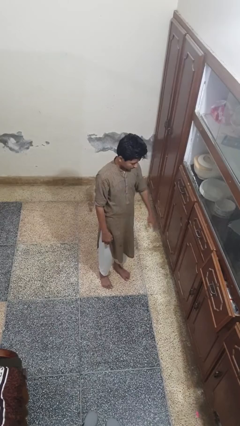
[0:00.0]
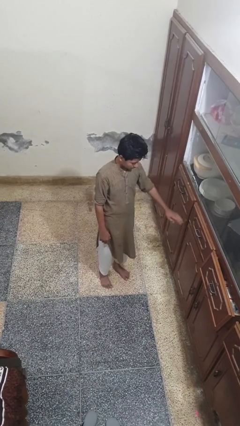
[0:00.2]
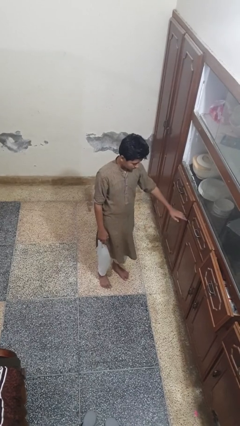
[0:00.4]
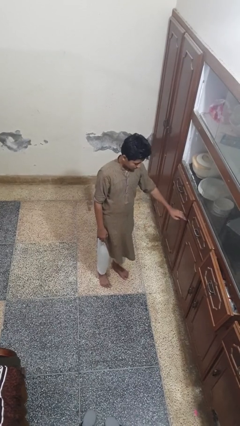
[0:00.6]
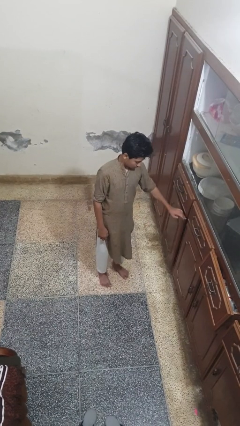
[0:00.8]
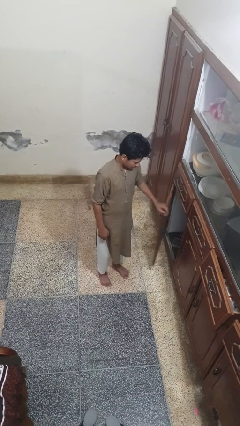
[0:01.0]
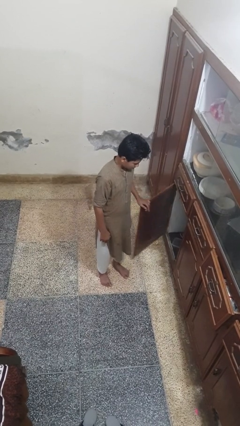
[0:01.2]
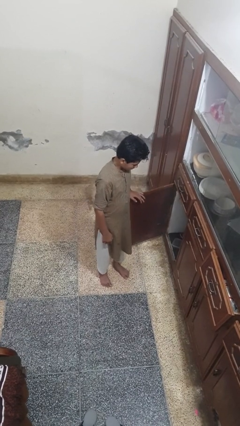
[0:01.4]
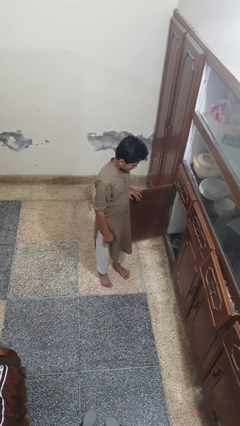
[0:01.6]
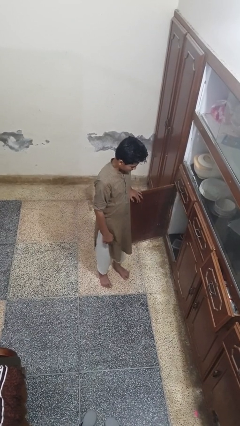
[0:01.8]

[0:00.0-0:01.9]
person opens cabinet

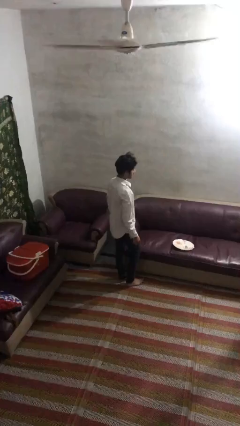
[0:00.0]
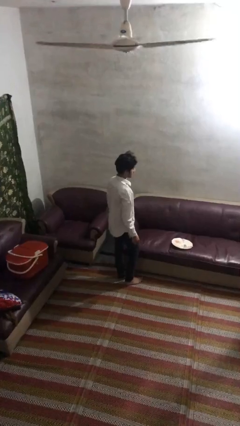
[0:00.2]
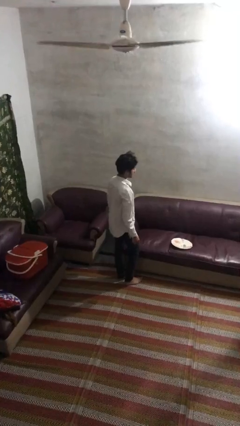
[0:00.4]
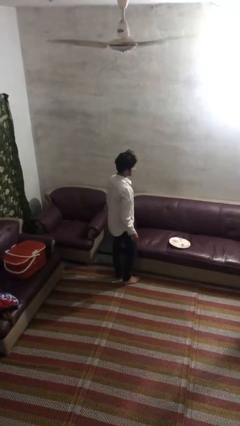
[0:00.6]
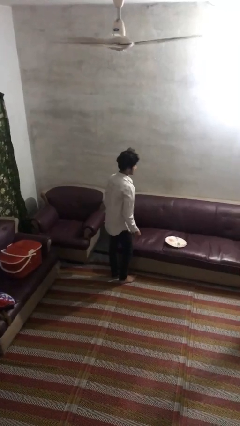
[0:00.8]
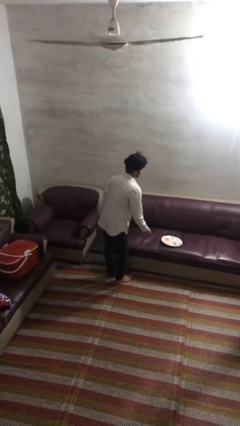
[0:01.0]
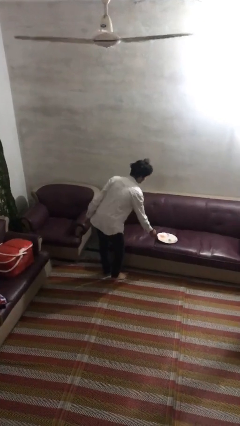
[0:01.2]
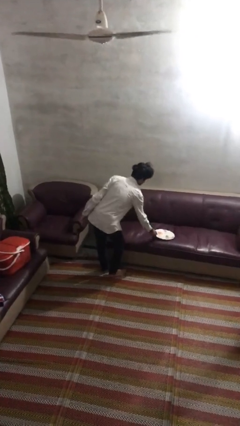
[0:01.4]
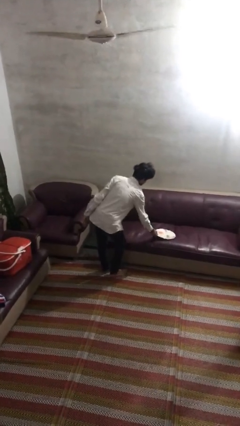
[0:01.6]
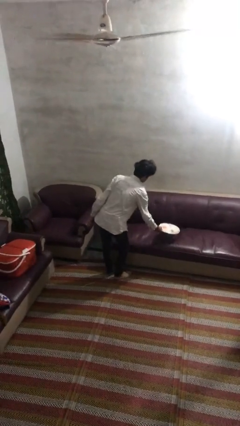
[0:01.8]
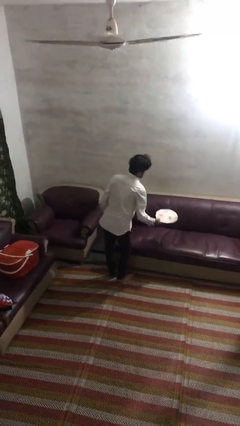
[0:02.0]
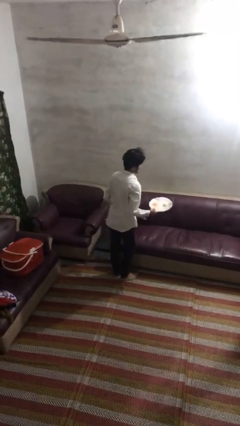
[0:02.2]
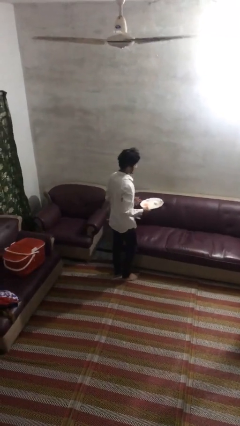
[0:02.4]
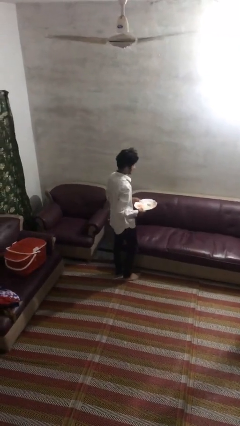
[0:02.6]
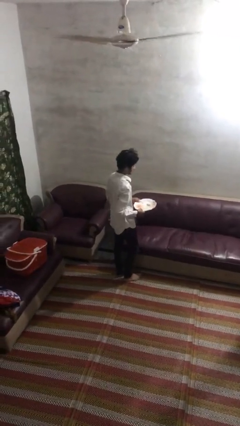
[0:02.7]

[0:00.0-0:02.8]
person picks up object from couch

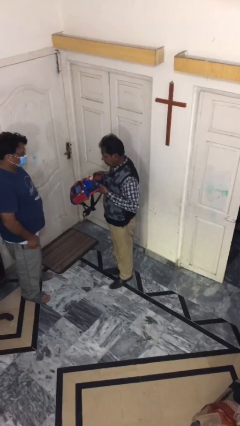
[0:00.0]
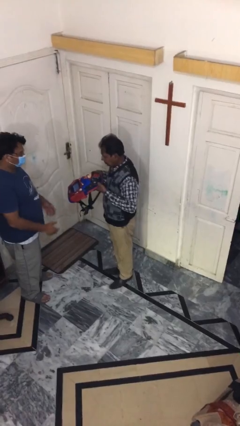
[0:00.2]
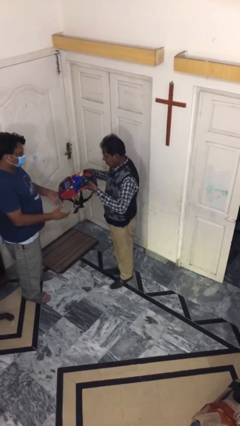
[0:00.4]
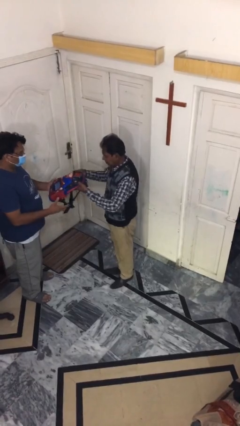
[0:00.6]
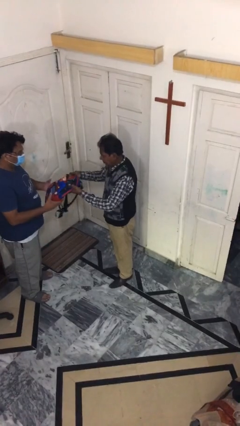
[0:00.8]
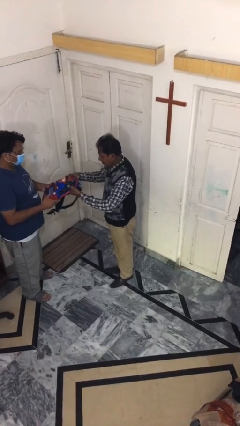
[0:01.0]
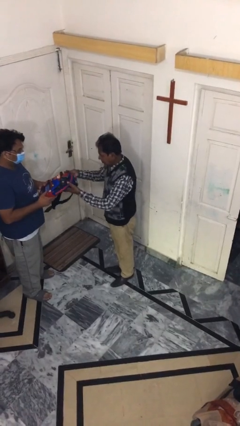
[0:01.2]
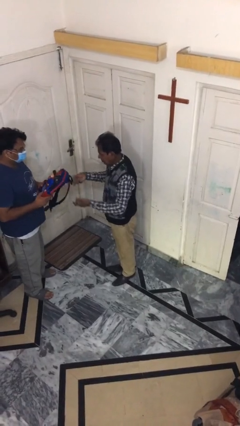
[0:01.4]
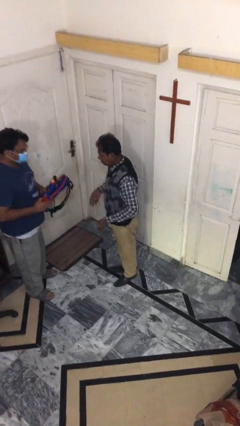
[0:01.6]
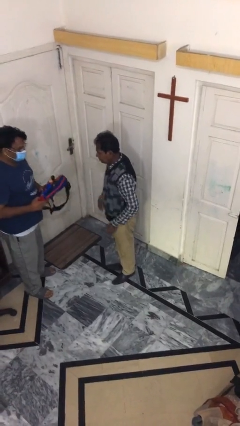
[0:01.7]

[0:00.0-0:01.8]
person transfers object to person

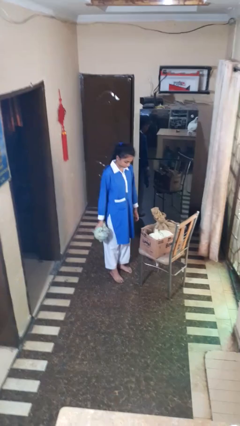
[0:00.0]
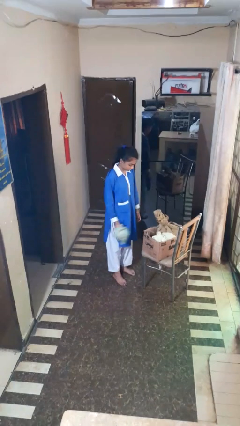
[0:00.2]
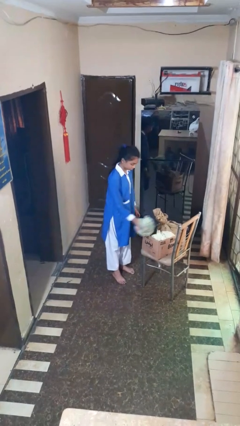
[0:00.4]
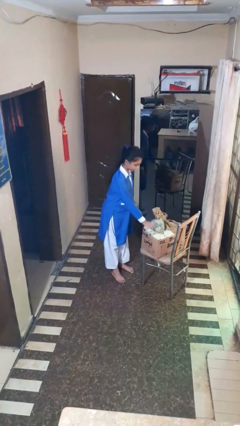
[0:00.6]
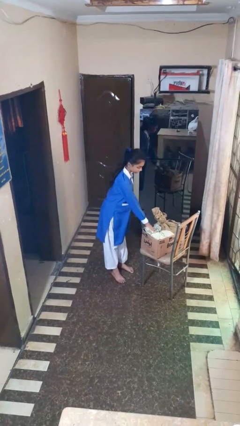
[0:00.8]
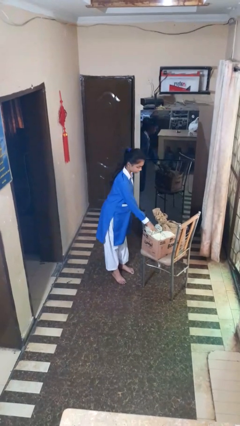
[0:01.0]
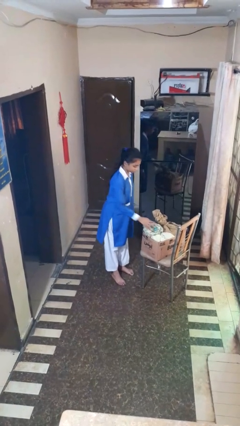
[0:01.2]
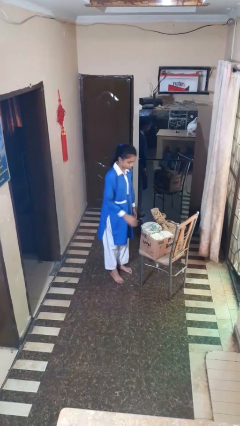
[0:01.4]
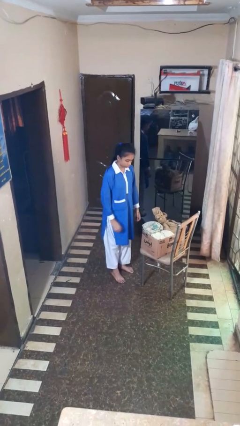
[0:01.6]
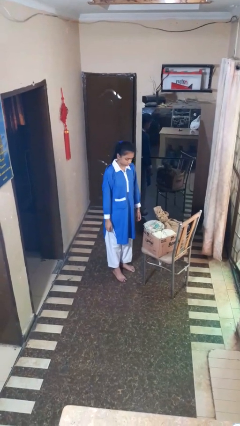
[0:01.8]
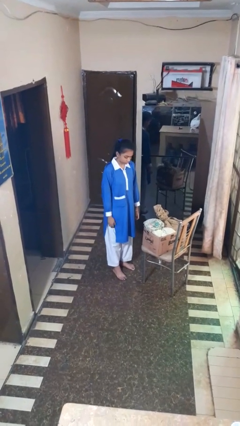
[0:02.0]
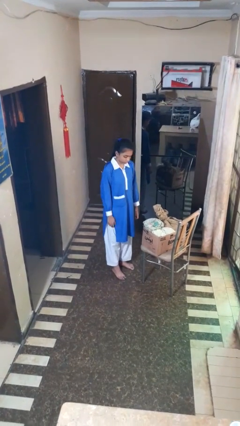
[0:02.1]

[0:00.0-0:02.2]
person puts object into box

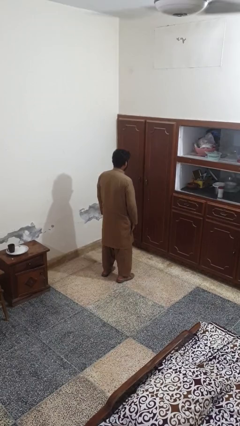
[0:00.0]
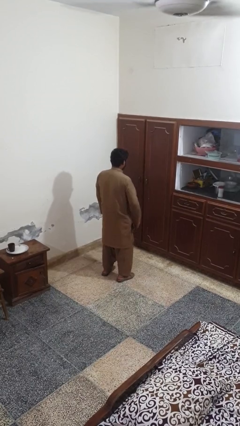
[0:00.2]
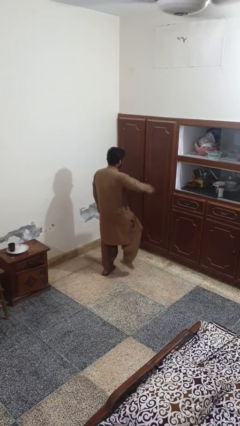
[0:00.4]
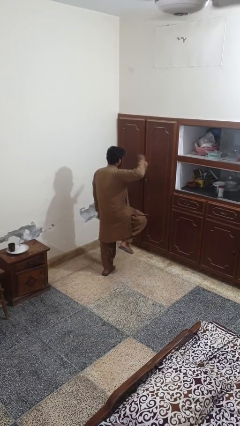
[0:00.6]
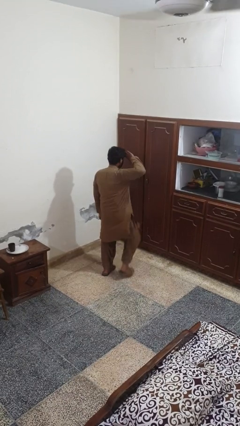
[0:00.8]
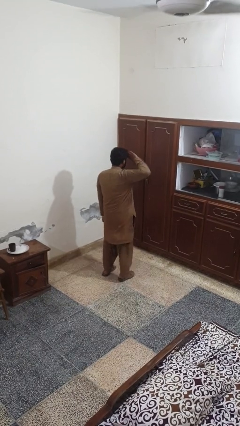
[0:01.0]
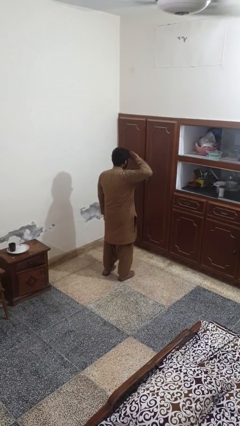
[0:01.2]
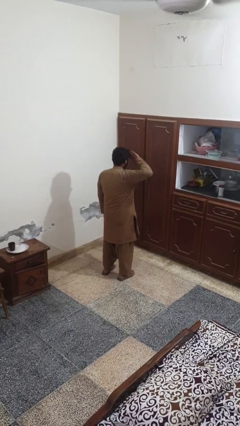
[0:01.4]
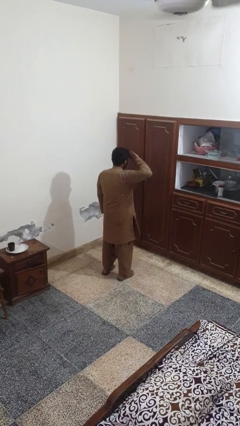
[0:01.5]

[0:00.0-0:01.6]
person salutes

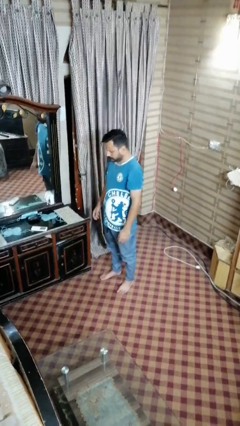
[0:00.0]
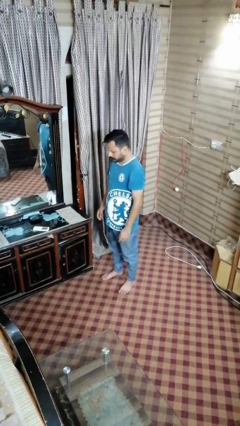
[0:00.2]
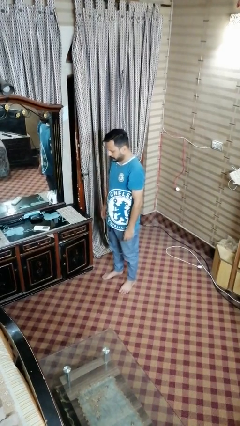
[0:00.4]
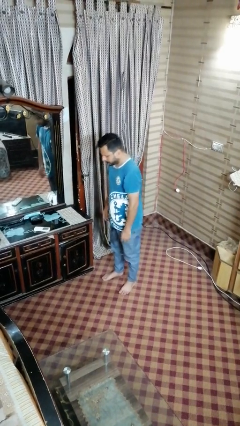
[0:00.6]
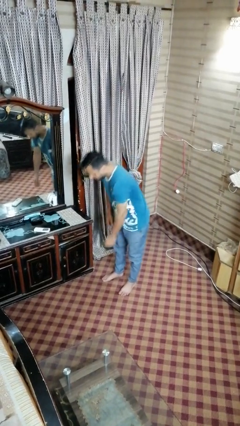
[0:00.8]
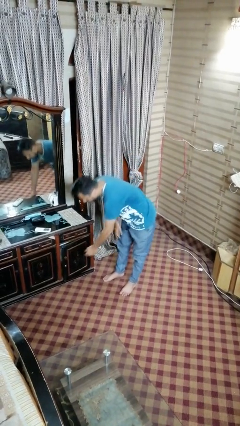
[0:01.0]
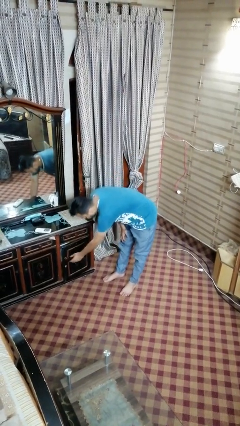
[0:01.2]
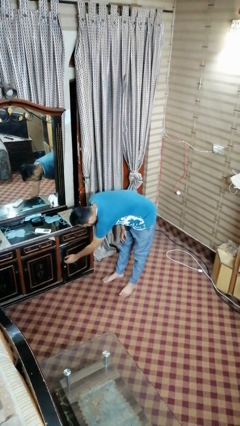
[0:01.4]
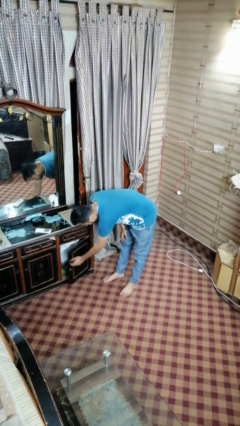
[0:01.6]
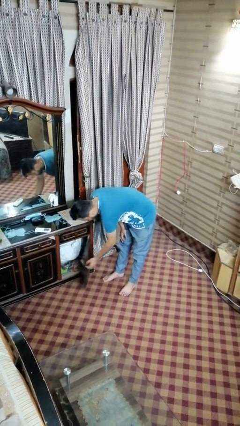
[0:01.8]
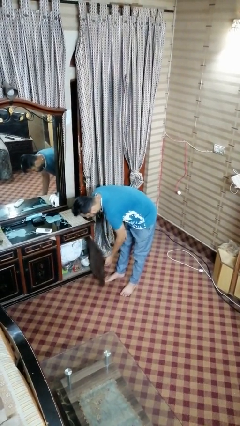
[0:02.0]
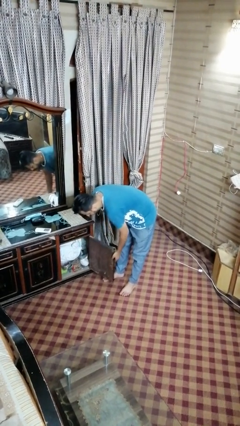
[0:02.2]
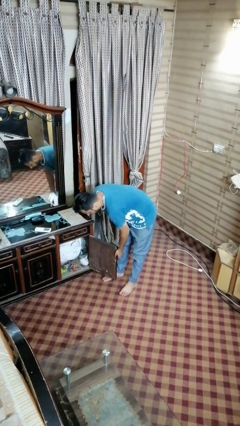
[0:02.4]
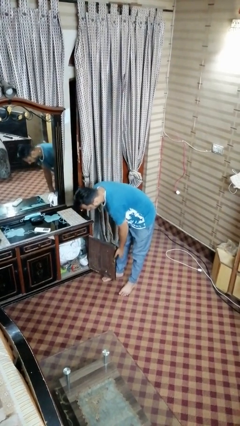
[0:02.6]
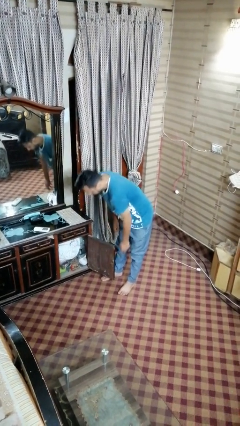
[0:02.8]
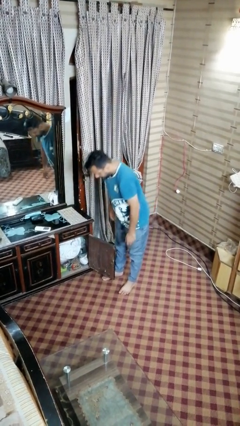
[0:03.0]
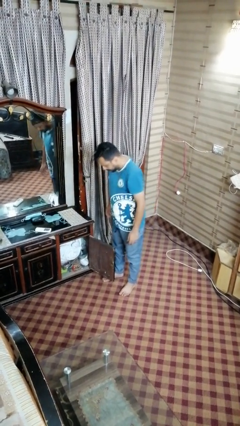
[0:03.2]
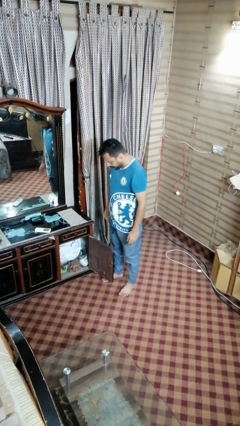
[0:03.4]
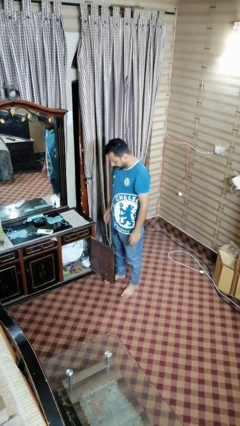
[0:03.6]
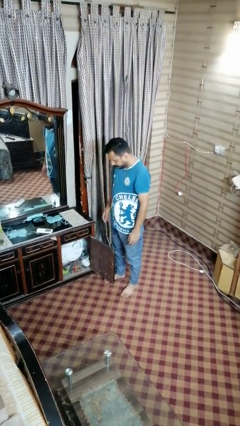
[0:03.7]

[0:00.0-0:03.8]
person opens dresser drawer

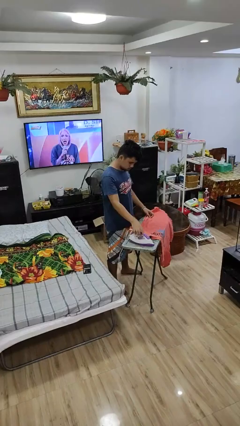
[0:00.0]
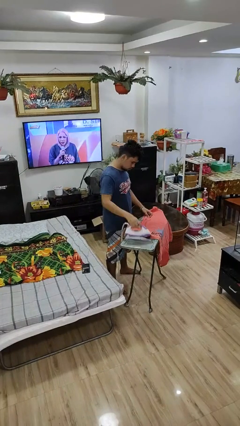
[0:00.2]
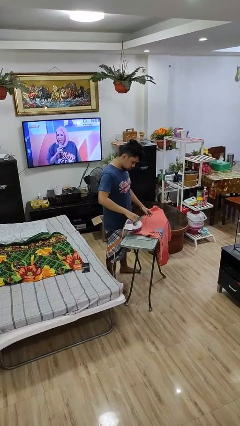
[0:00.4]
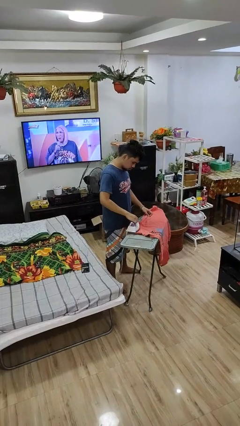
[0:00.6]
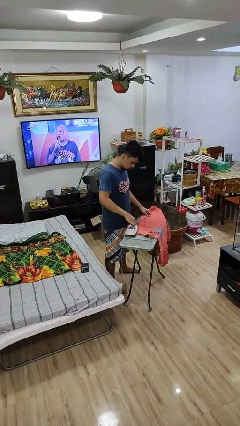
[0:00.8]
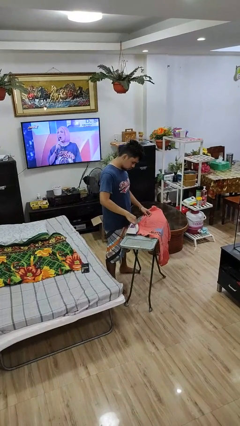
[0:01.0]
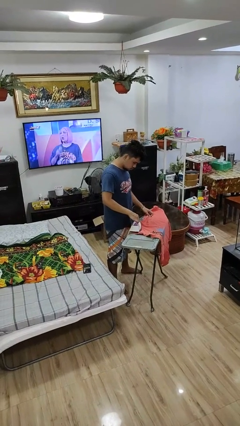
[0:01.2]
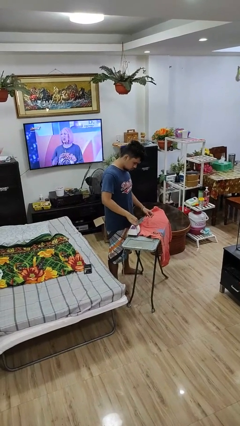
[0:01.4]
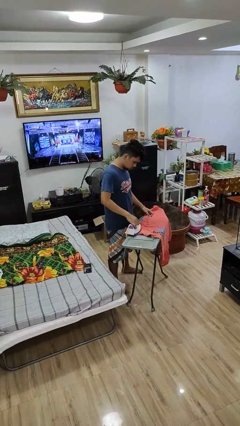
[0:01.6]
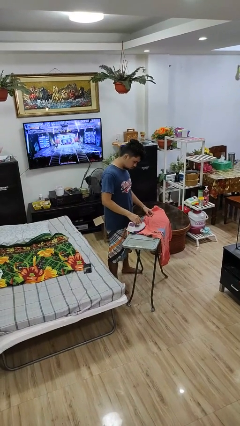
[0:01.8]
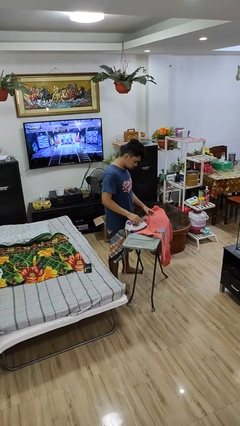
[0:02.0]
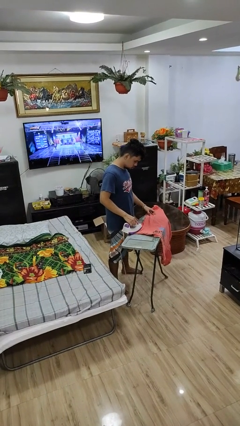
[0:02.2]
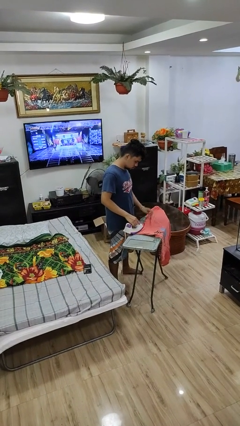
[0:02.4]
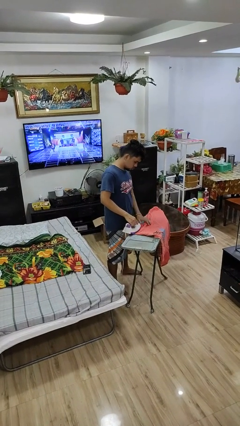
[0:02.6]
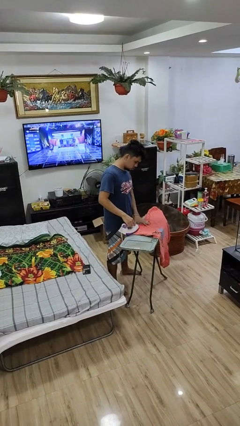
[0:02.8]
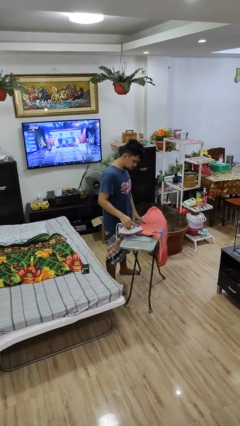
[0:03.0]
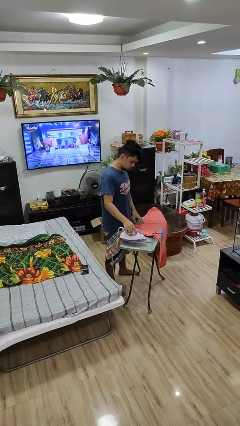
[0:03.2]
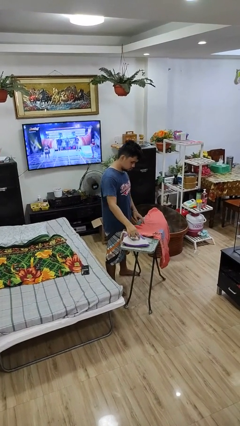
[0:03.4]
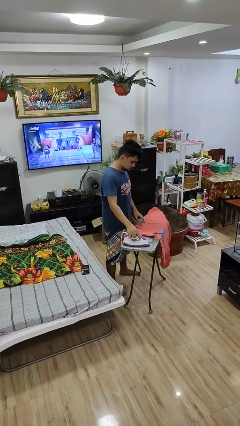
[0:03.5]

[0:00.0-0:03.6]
person irons clothes
